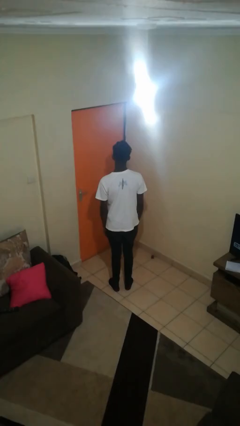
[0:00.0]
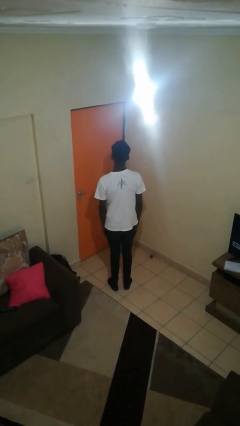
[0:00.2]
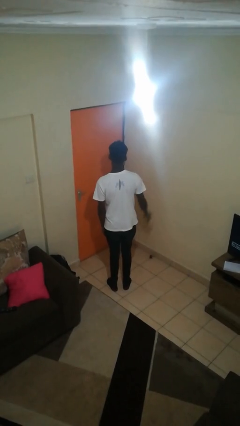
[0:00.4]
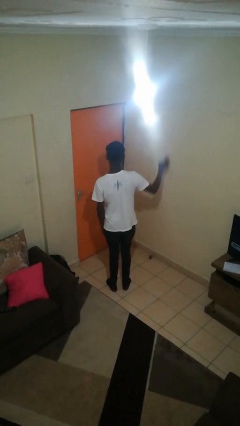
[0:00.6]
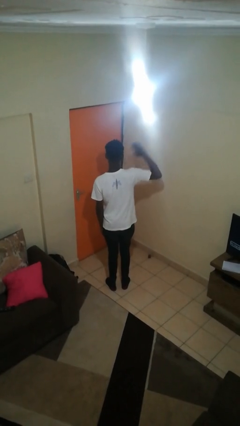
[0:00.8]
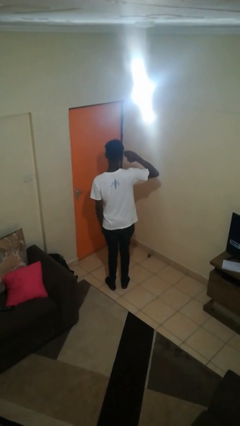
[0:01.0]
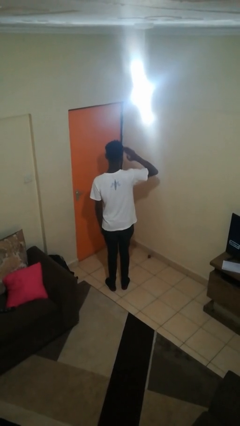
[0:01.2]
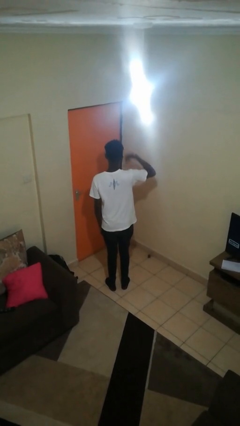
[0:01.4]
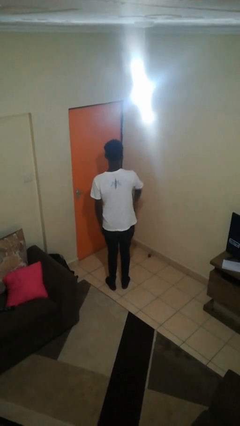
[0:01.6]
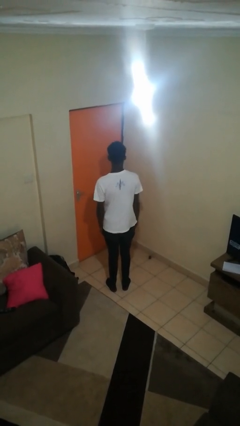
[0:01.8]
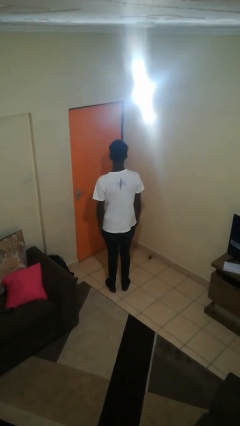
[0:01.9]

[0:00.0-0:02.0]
person salutes

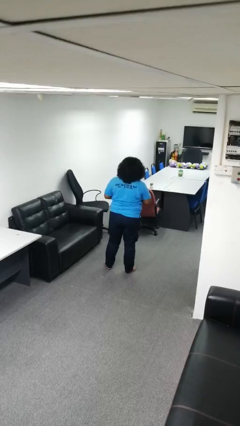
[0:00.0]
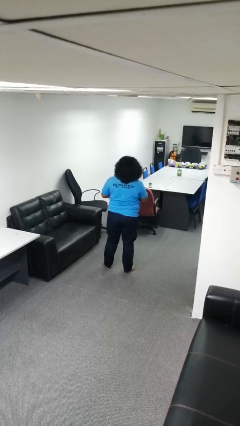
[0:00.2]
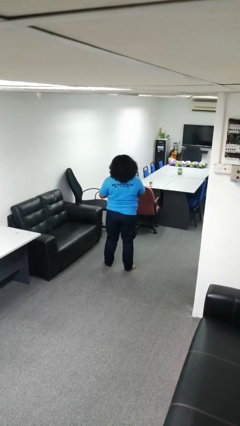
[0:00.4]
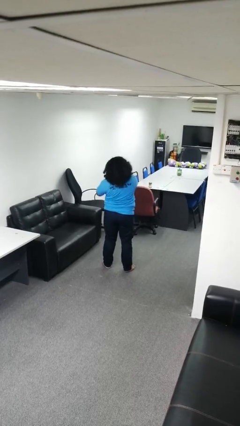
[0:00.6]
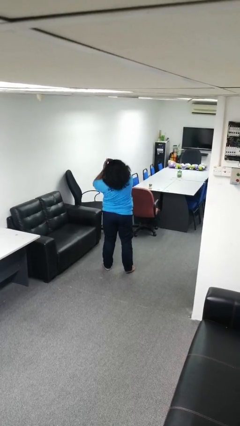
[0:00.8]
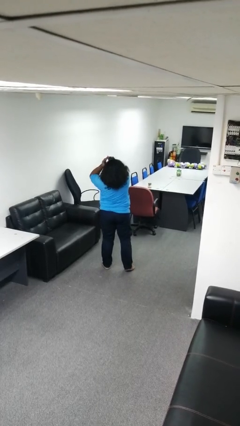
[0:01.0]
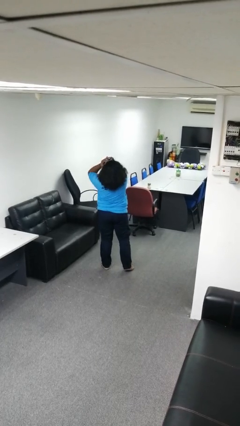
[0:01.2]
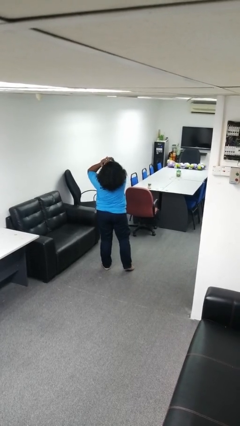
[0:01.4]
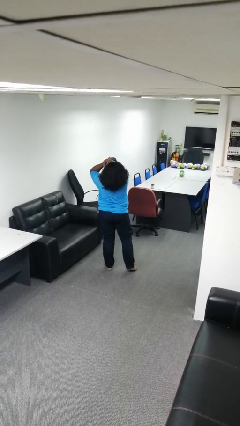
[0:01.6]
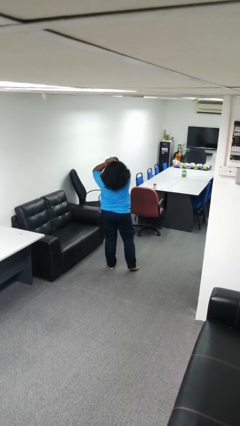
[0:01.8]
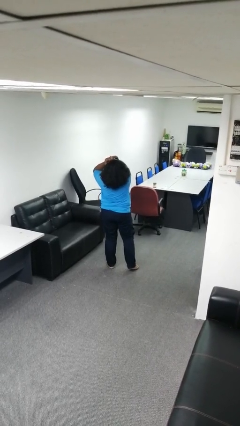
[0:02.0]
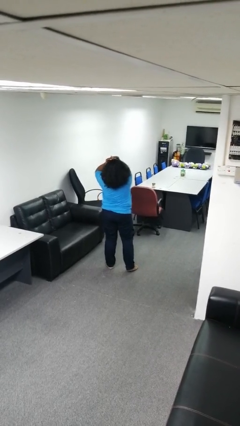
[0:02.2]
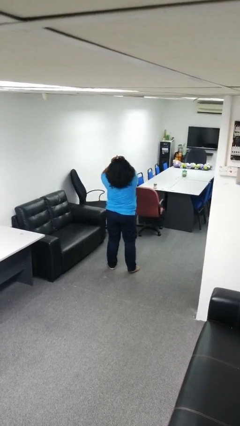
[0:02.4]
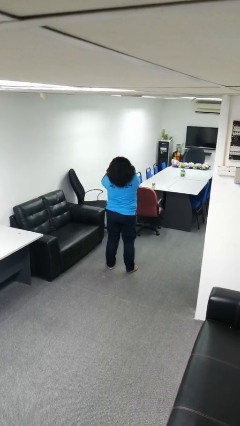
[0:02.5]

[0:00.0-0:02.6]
person covers face with hands

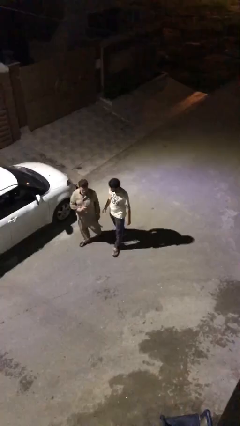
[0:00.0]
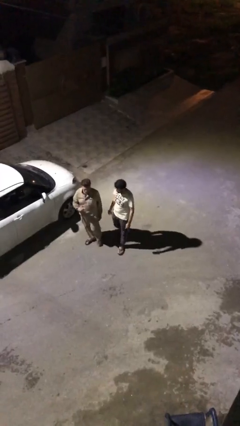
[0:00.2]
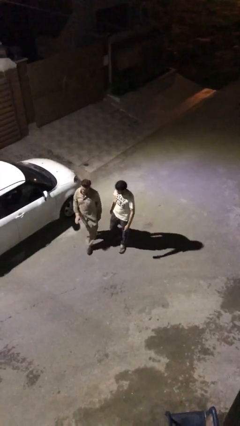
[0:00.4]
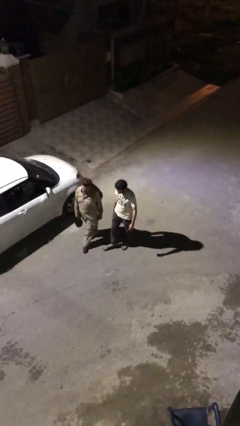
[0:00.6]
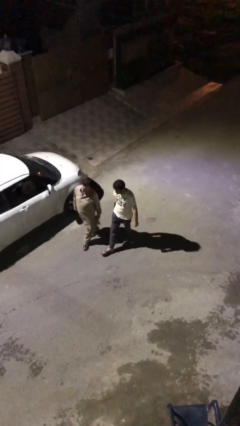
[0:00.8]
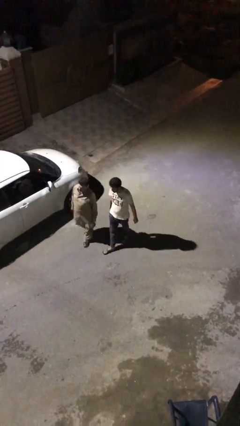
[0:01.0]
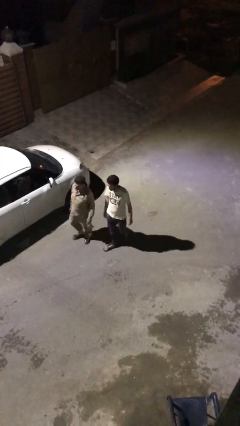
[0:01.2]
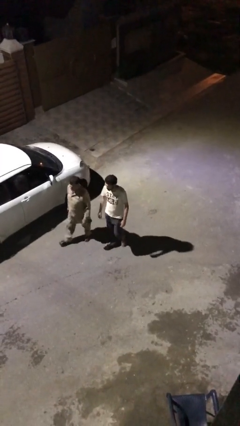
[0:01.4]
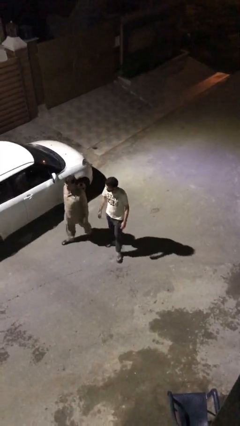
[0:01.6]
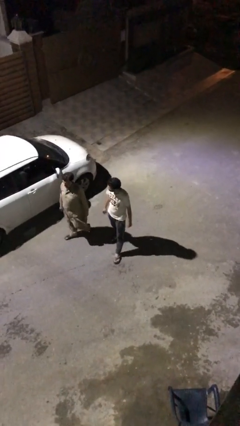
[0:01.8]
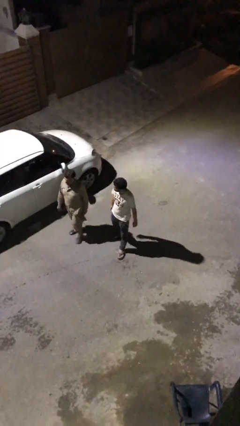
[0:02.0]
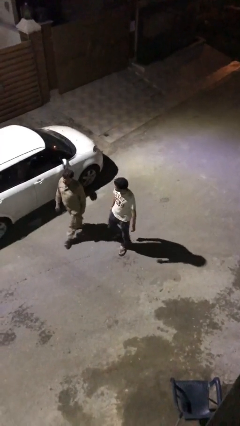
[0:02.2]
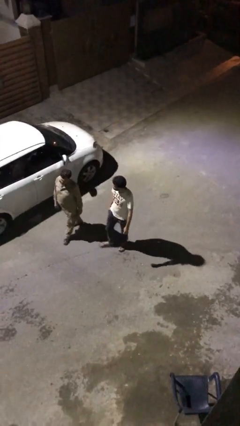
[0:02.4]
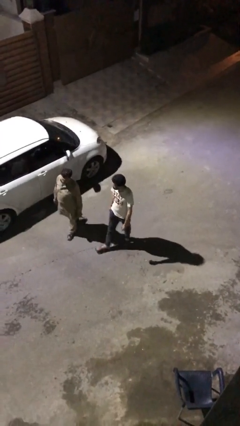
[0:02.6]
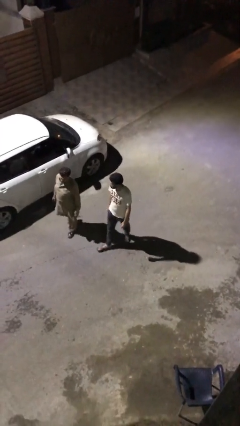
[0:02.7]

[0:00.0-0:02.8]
person talks to person

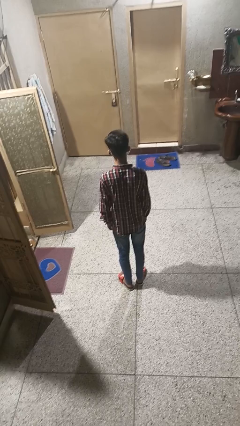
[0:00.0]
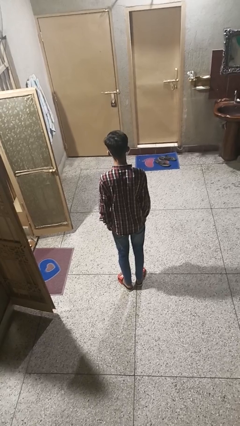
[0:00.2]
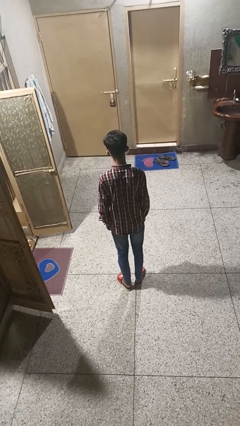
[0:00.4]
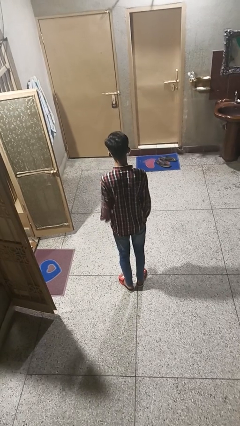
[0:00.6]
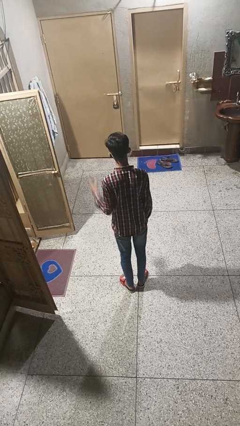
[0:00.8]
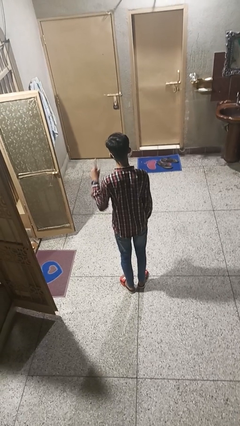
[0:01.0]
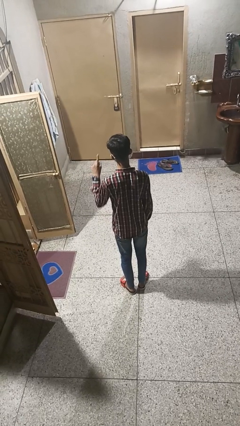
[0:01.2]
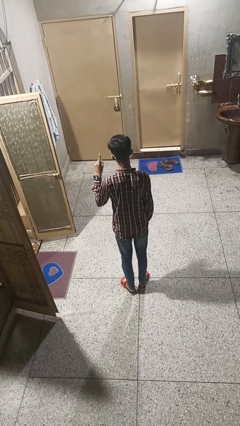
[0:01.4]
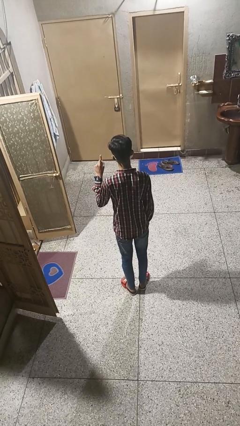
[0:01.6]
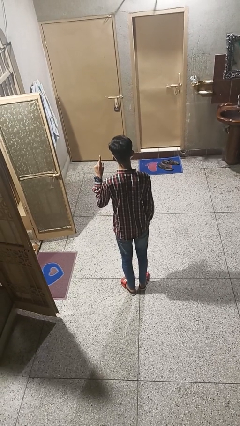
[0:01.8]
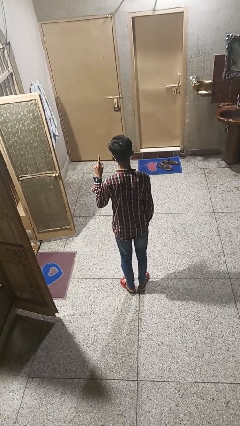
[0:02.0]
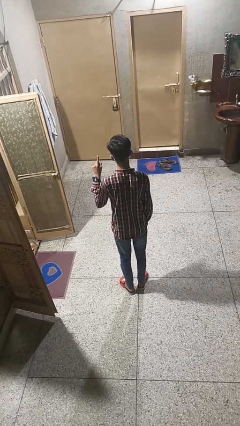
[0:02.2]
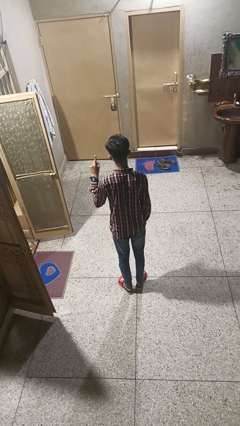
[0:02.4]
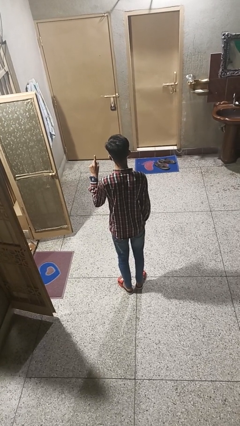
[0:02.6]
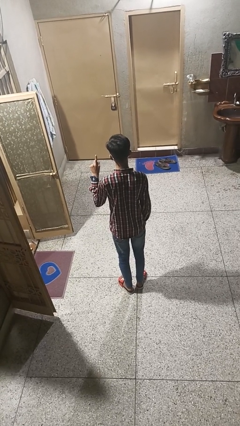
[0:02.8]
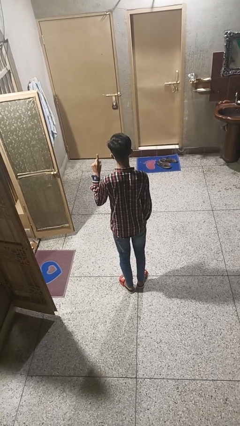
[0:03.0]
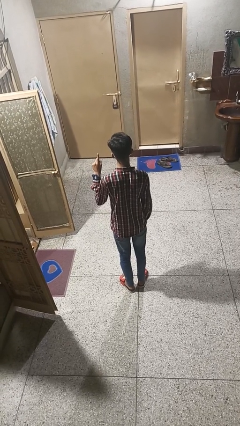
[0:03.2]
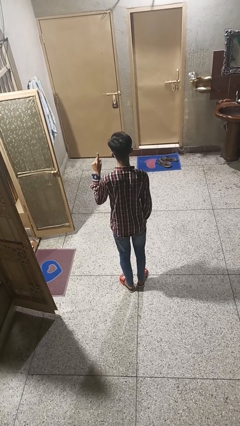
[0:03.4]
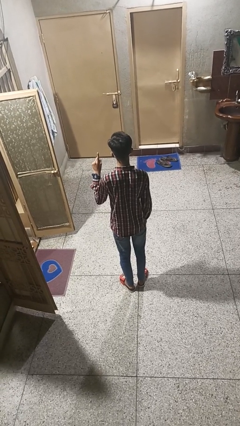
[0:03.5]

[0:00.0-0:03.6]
person gestures number one

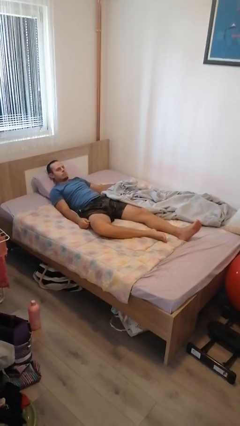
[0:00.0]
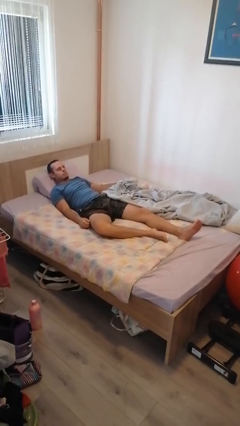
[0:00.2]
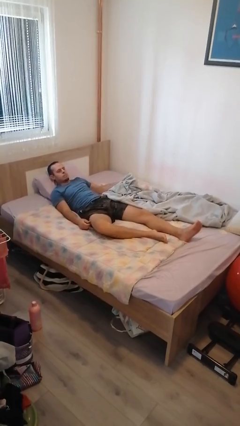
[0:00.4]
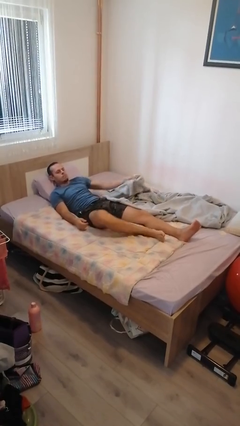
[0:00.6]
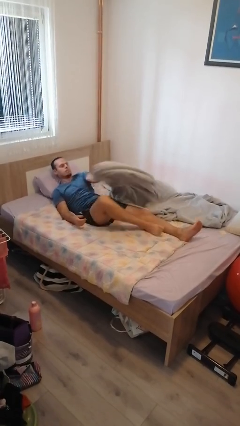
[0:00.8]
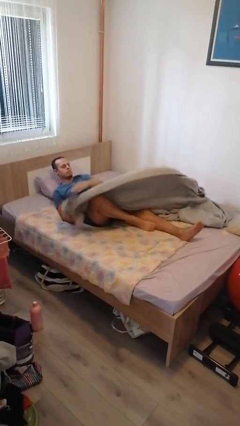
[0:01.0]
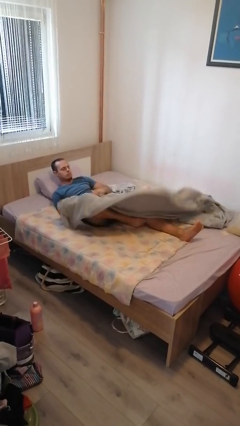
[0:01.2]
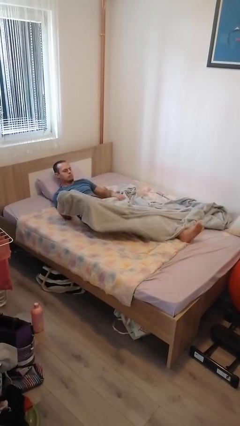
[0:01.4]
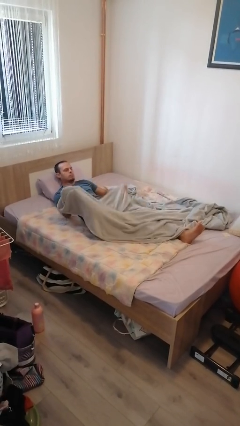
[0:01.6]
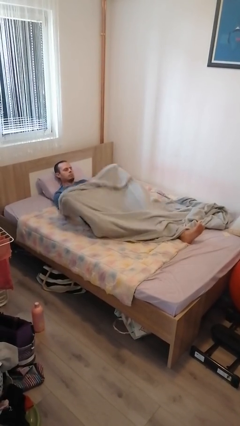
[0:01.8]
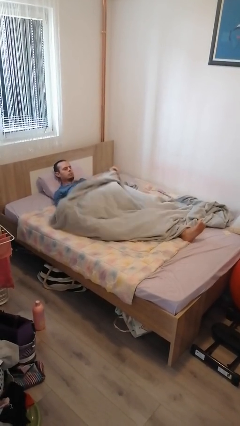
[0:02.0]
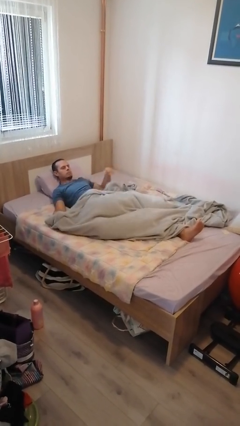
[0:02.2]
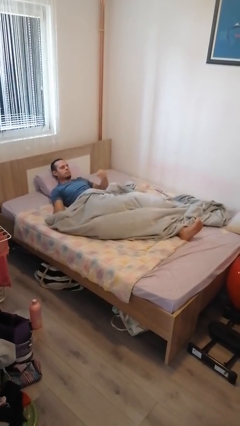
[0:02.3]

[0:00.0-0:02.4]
person covers with bedsheets

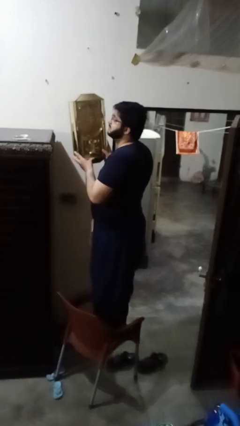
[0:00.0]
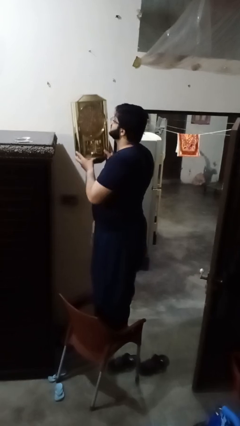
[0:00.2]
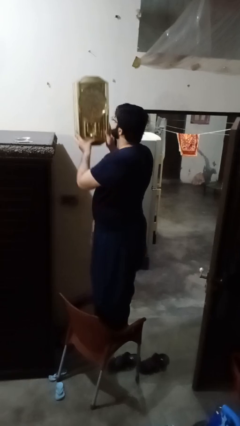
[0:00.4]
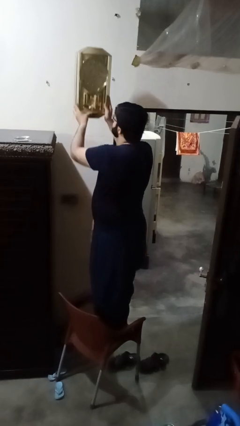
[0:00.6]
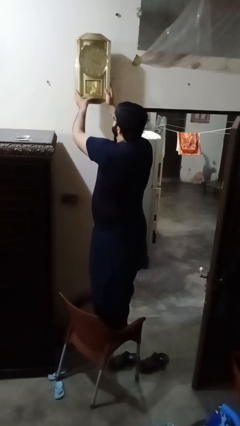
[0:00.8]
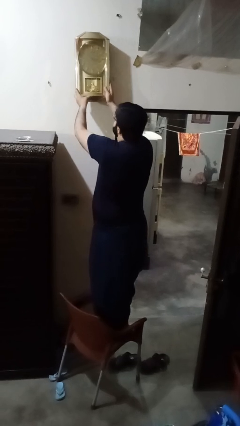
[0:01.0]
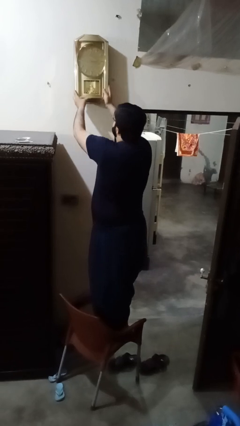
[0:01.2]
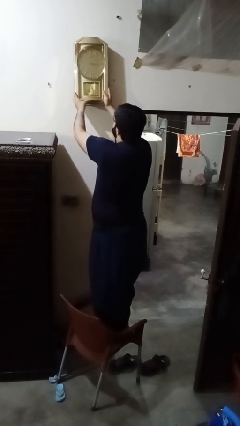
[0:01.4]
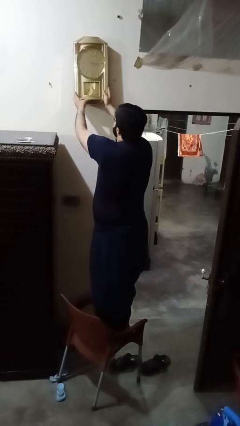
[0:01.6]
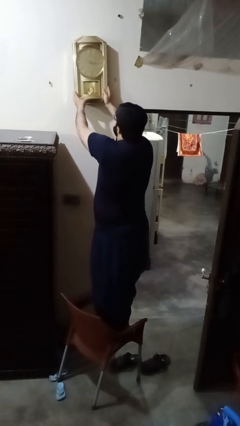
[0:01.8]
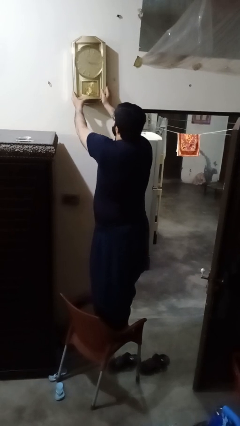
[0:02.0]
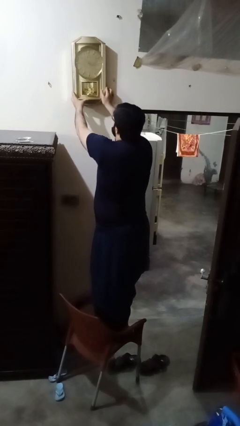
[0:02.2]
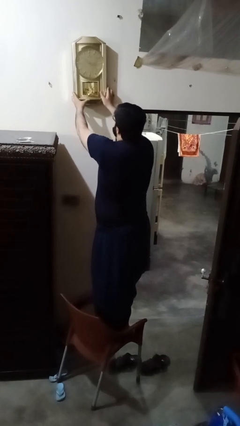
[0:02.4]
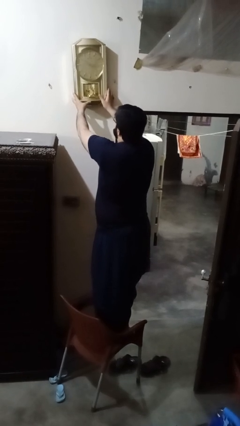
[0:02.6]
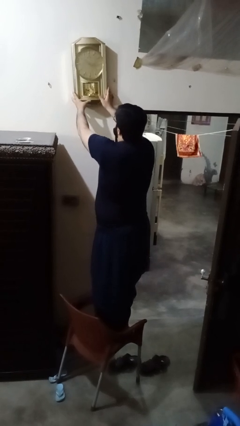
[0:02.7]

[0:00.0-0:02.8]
person puts up smoke detector

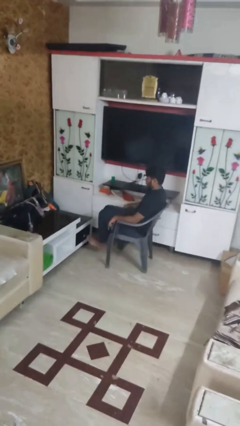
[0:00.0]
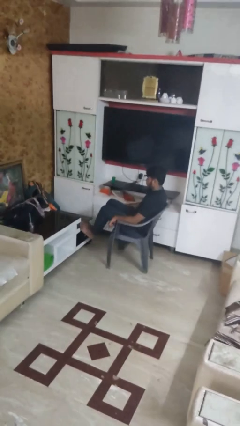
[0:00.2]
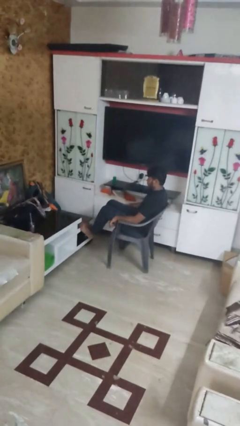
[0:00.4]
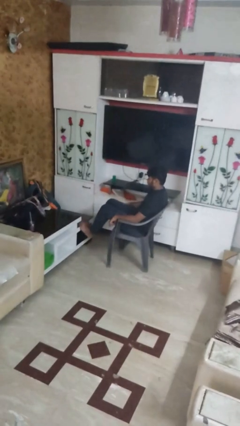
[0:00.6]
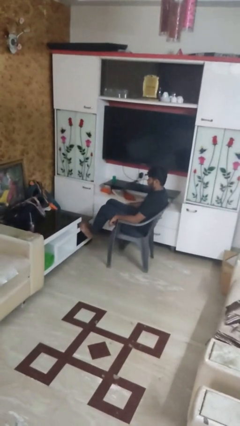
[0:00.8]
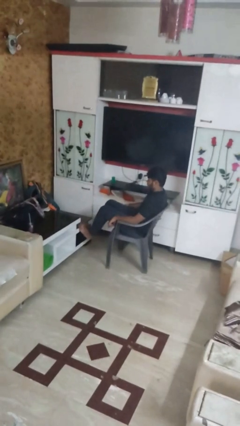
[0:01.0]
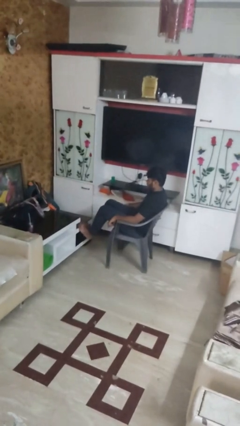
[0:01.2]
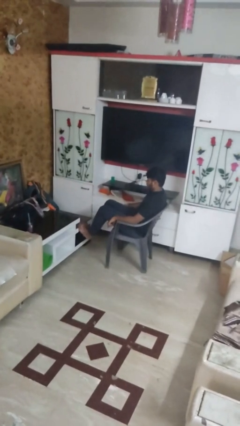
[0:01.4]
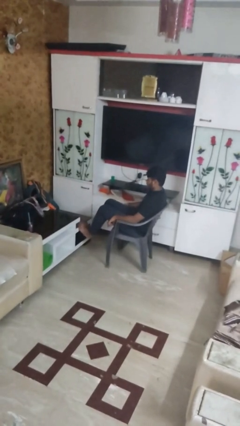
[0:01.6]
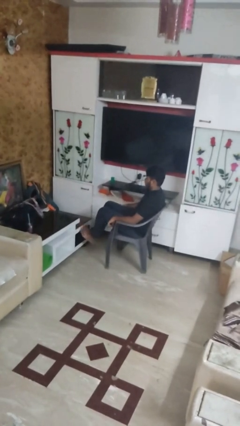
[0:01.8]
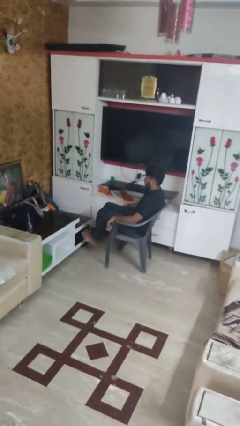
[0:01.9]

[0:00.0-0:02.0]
person puts feet up
